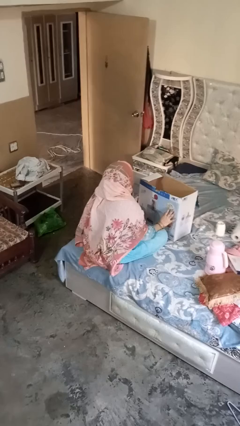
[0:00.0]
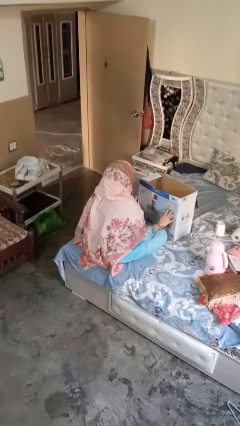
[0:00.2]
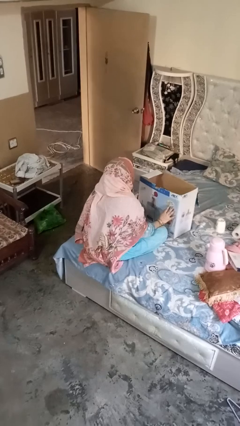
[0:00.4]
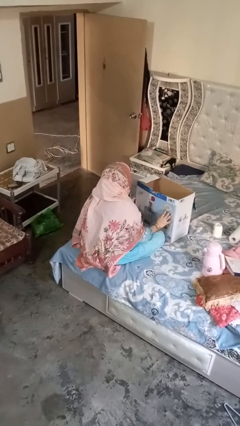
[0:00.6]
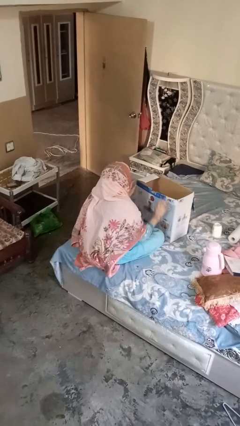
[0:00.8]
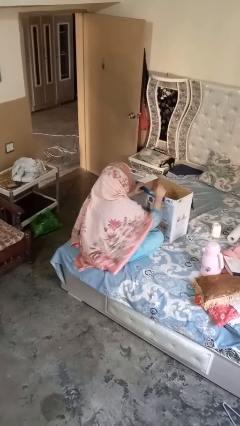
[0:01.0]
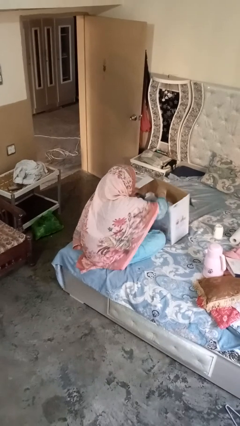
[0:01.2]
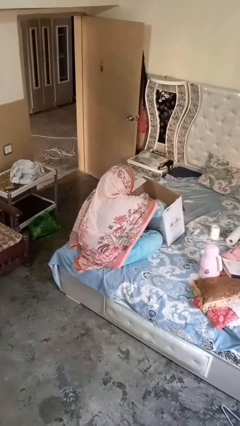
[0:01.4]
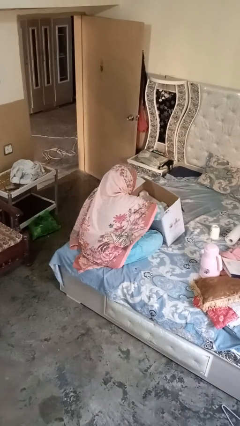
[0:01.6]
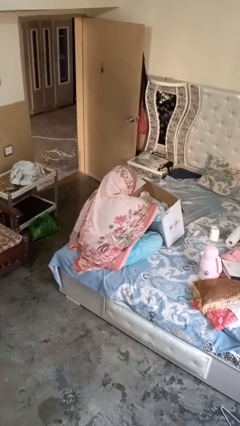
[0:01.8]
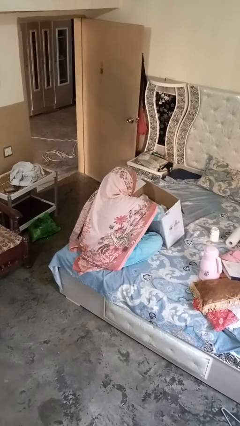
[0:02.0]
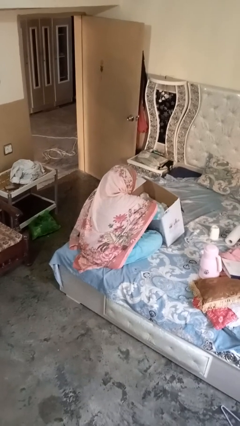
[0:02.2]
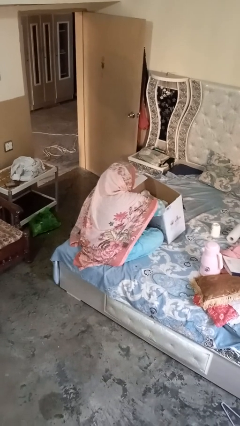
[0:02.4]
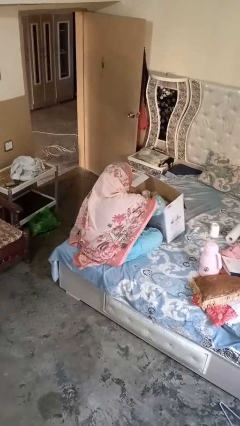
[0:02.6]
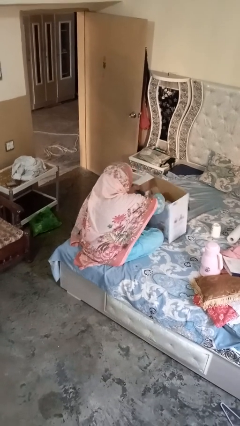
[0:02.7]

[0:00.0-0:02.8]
person searches in box

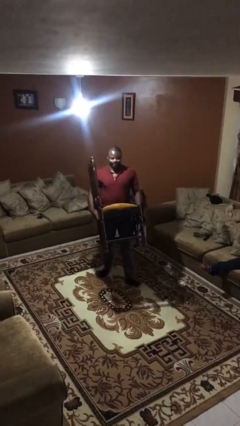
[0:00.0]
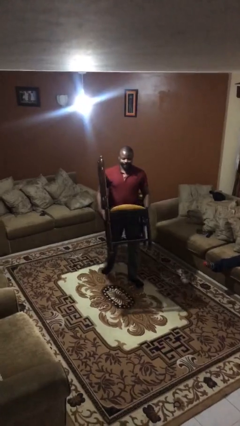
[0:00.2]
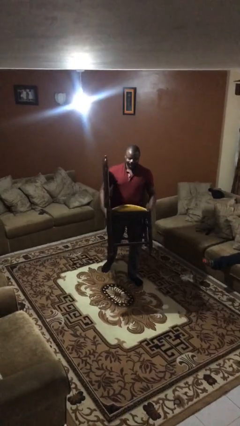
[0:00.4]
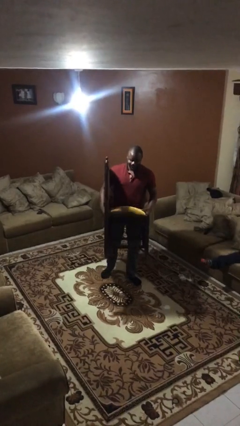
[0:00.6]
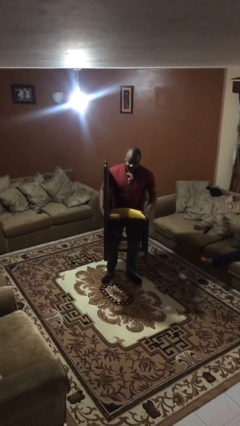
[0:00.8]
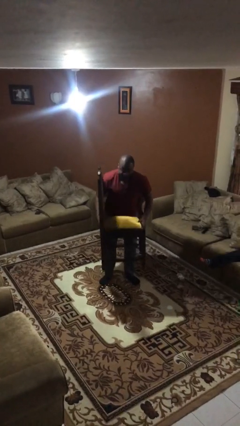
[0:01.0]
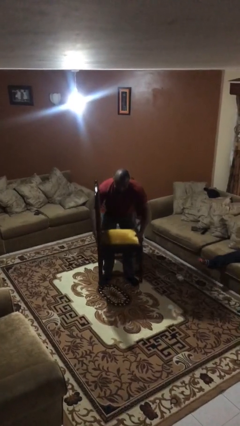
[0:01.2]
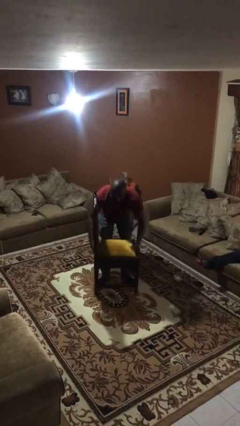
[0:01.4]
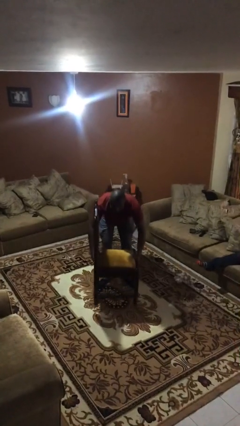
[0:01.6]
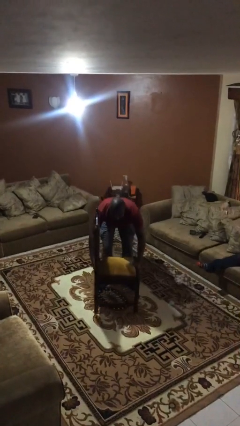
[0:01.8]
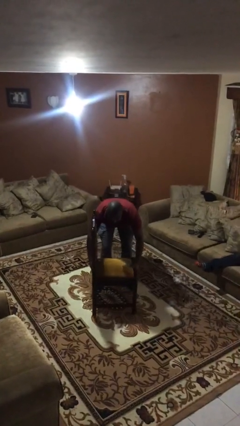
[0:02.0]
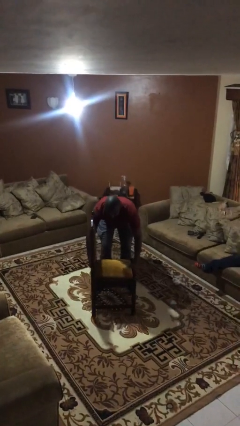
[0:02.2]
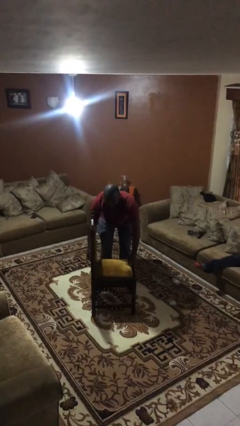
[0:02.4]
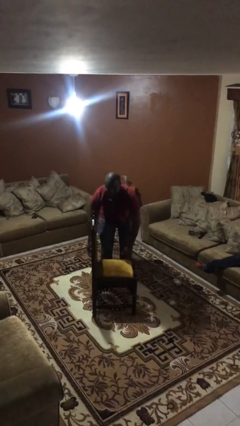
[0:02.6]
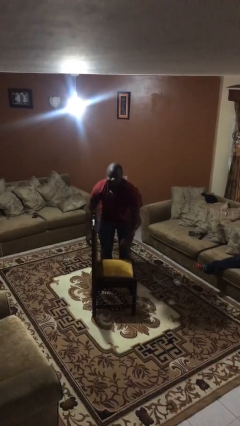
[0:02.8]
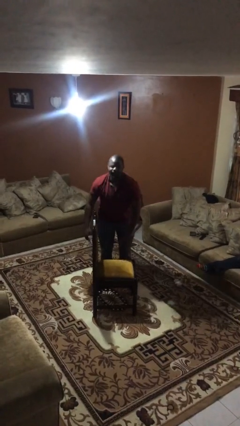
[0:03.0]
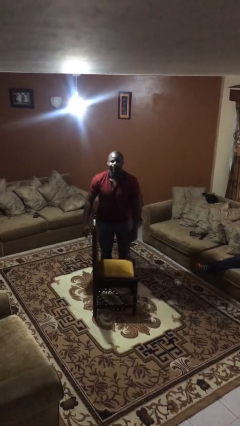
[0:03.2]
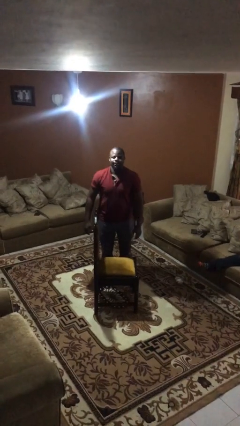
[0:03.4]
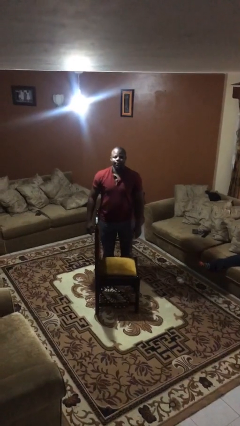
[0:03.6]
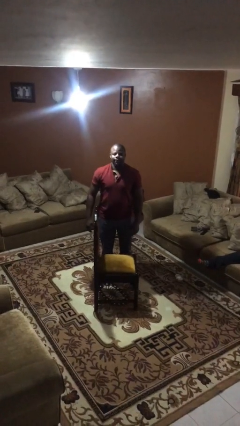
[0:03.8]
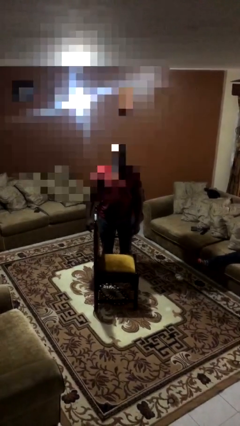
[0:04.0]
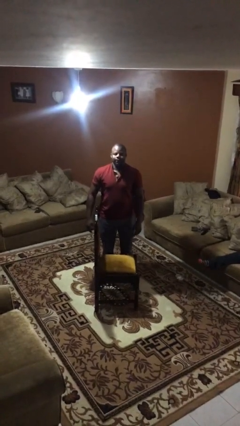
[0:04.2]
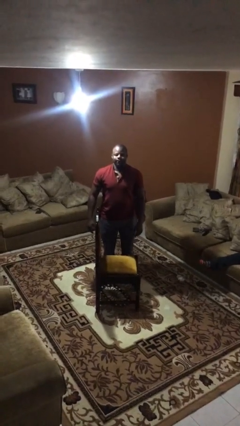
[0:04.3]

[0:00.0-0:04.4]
person puts down object on floor

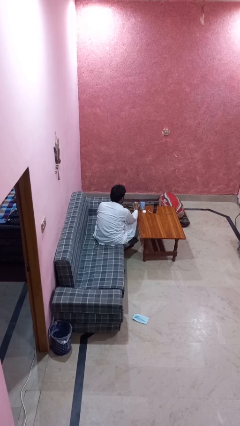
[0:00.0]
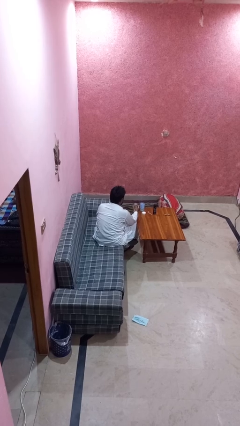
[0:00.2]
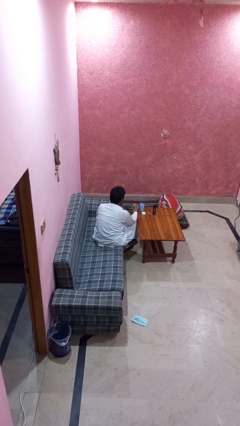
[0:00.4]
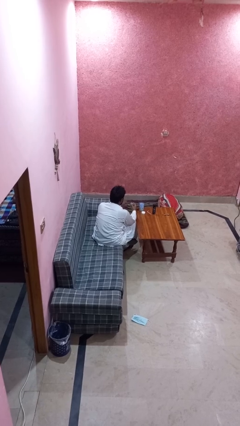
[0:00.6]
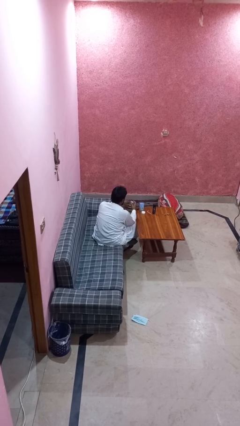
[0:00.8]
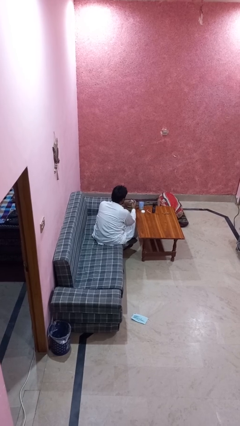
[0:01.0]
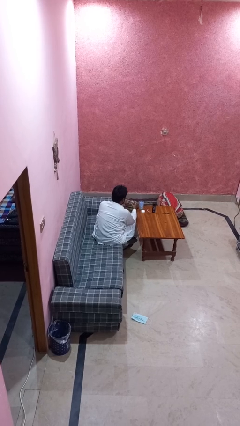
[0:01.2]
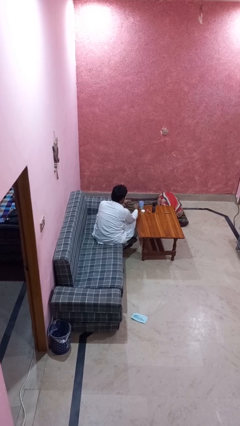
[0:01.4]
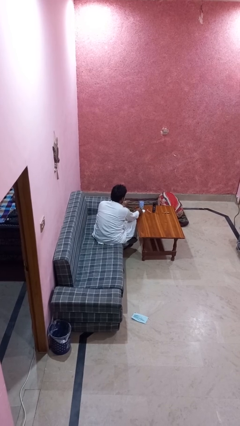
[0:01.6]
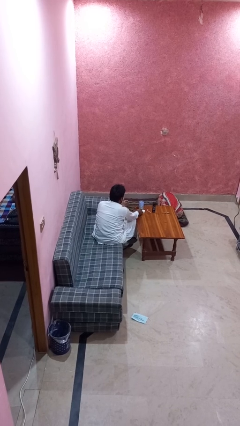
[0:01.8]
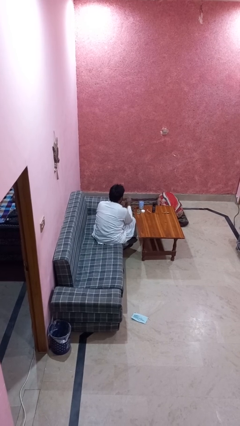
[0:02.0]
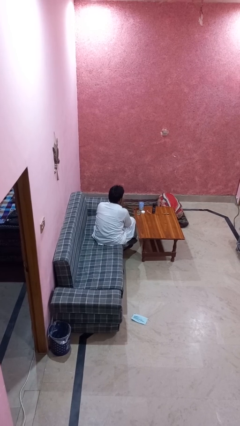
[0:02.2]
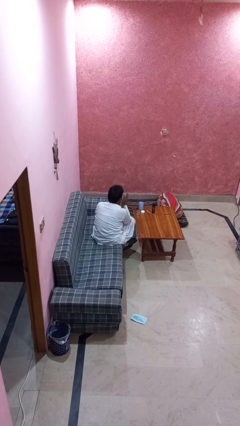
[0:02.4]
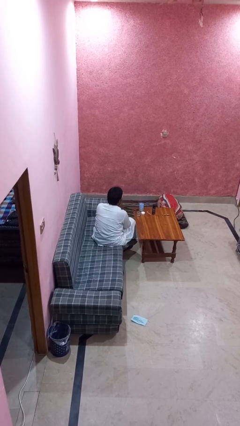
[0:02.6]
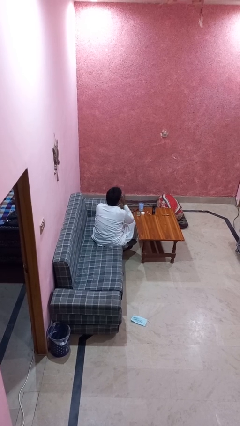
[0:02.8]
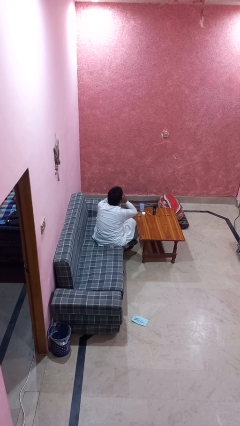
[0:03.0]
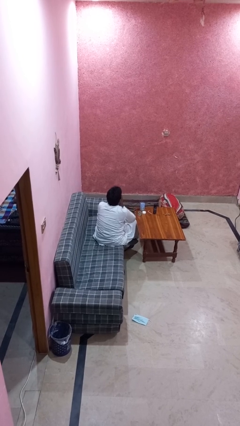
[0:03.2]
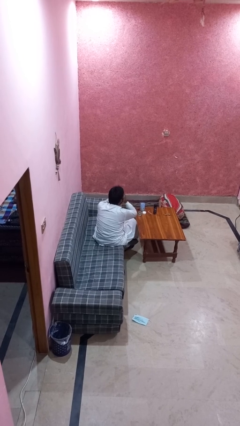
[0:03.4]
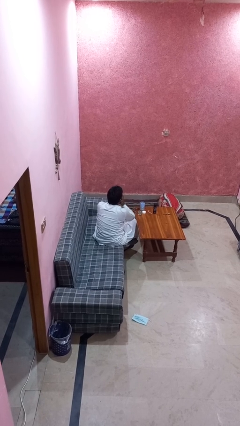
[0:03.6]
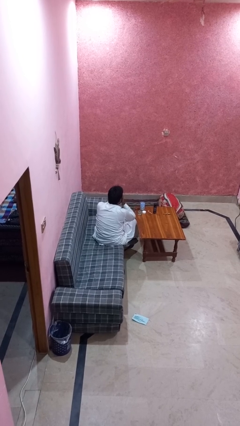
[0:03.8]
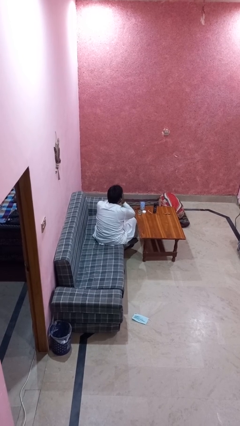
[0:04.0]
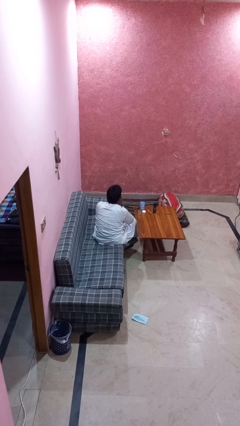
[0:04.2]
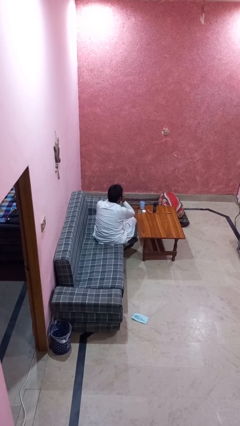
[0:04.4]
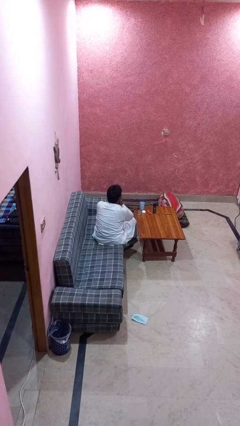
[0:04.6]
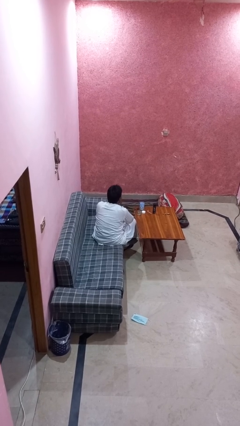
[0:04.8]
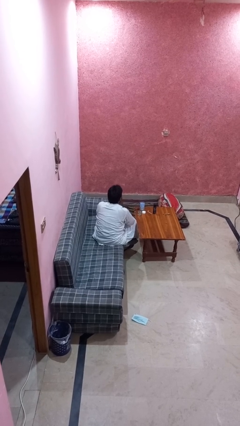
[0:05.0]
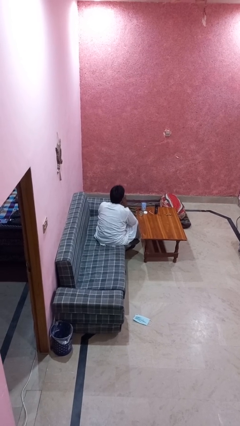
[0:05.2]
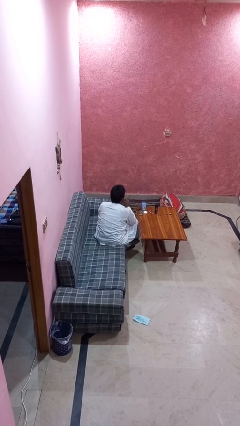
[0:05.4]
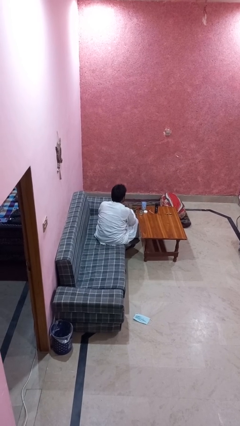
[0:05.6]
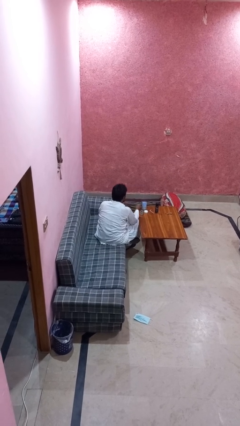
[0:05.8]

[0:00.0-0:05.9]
person applies facial moisturizer

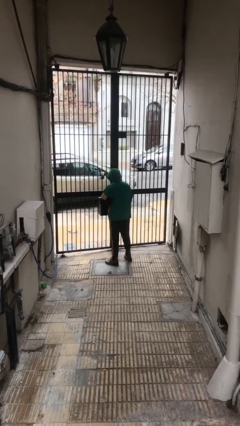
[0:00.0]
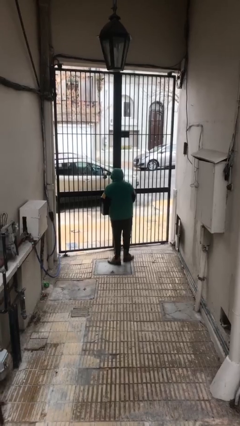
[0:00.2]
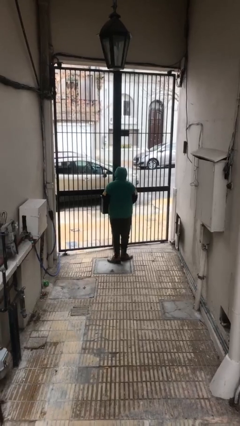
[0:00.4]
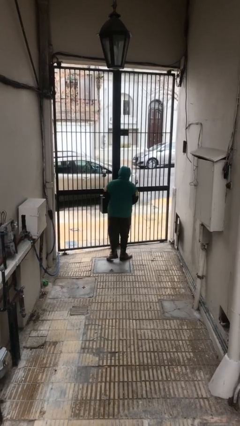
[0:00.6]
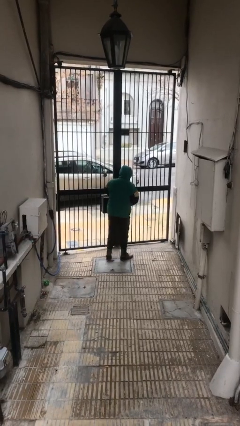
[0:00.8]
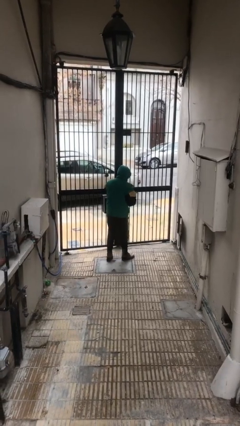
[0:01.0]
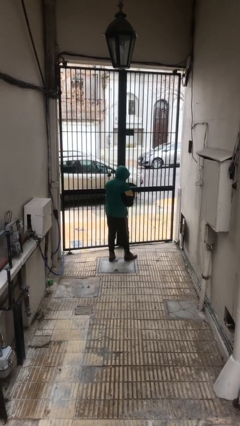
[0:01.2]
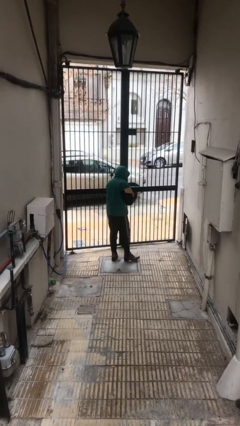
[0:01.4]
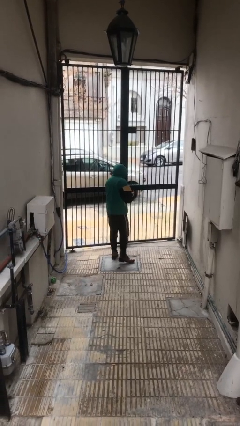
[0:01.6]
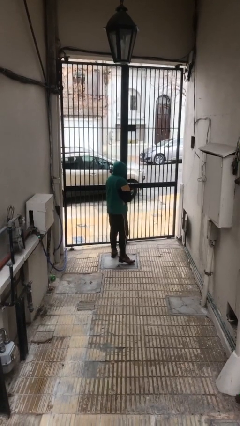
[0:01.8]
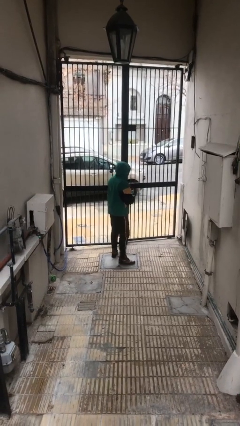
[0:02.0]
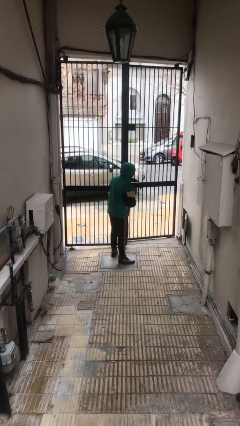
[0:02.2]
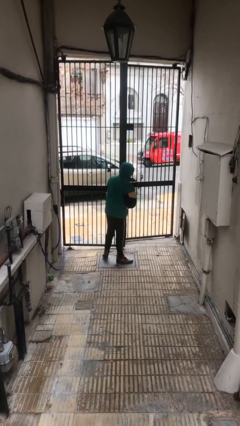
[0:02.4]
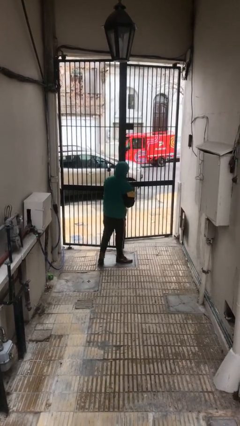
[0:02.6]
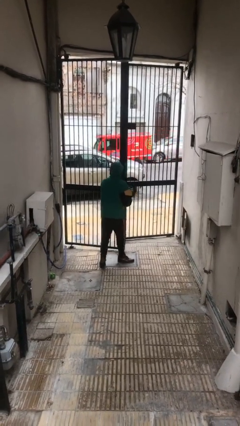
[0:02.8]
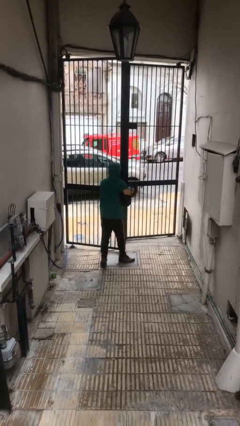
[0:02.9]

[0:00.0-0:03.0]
person opens gate

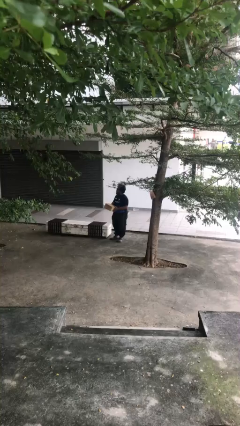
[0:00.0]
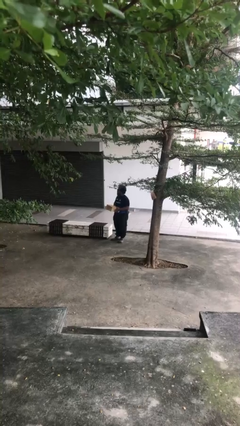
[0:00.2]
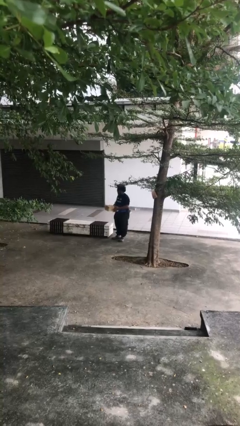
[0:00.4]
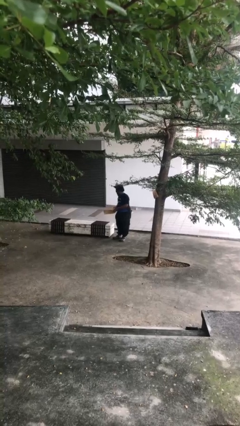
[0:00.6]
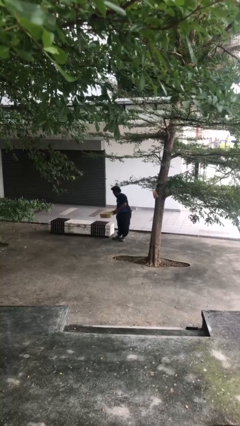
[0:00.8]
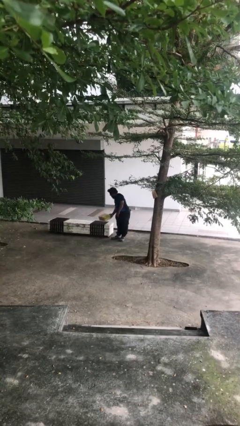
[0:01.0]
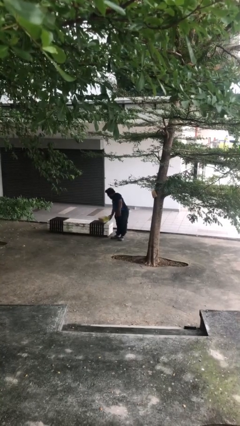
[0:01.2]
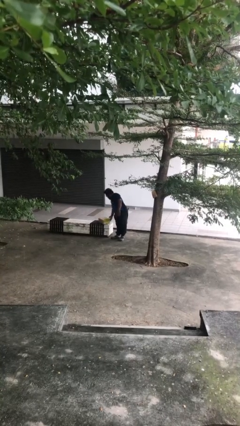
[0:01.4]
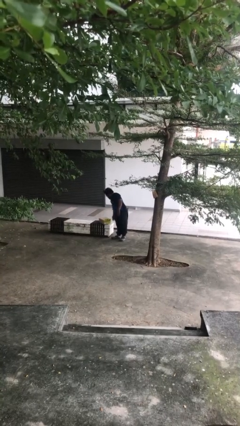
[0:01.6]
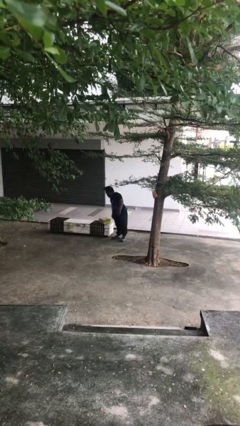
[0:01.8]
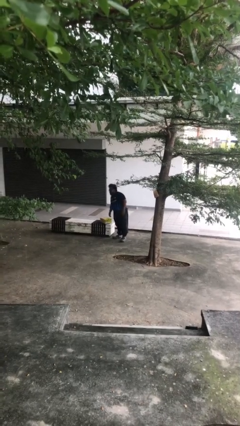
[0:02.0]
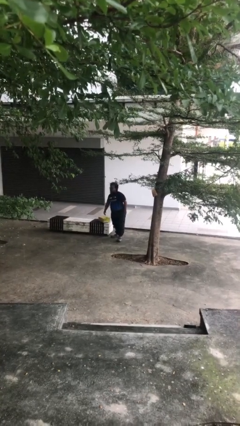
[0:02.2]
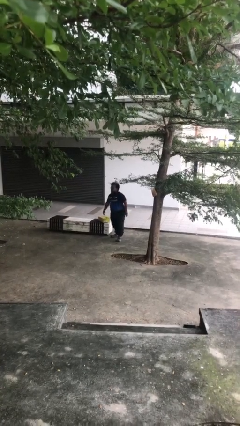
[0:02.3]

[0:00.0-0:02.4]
person puts down object on table
